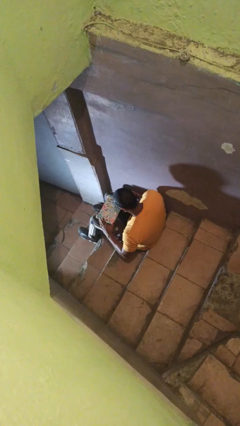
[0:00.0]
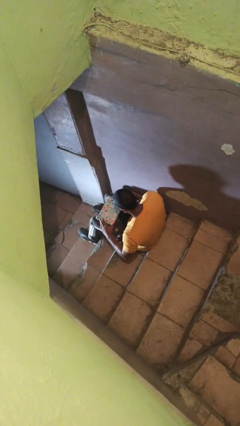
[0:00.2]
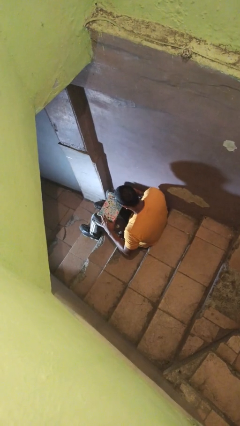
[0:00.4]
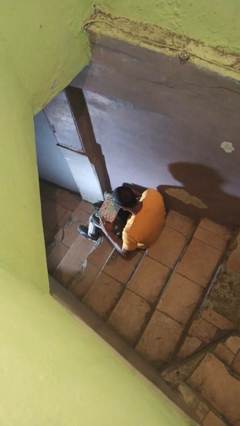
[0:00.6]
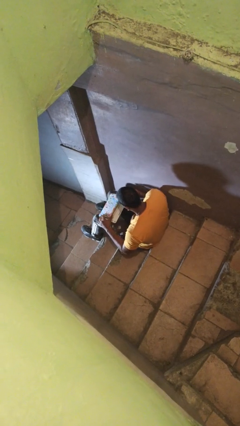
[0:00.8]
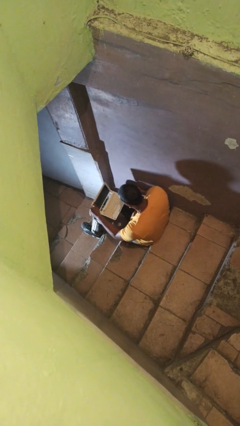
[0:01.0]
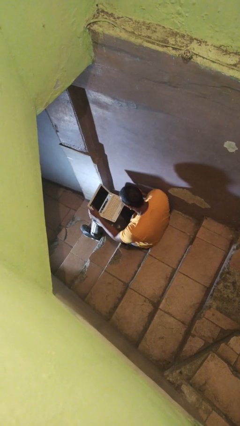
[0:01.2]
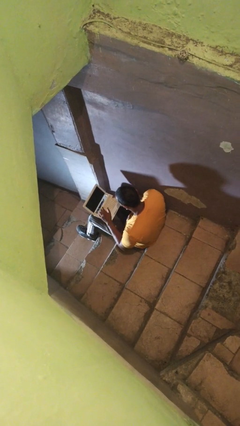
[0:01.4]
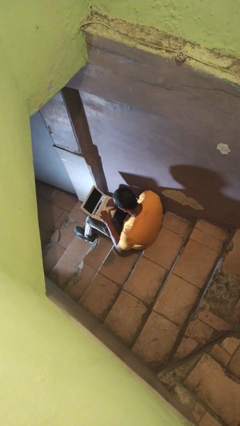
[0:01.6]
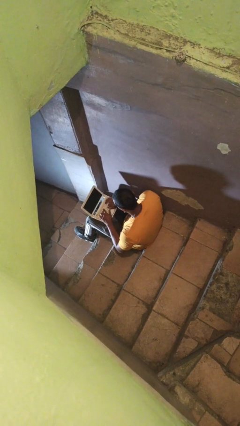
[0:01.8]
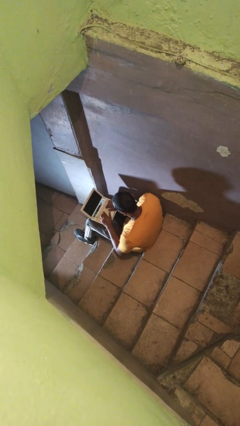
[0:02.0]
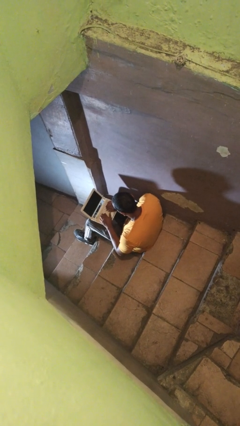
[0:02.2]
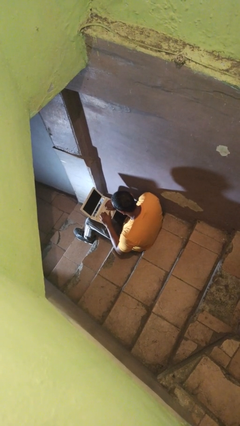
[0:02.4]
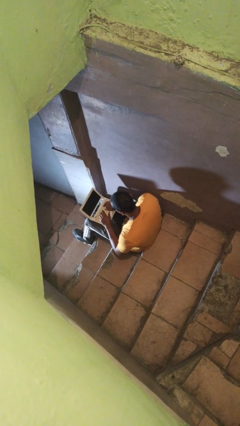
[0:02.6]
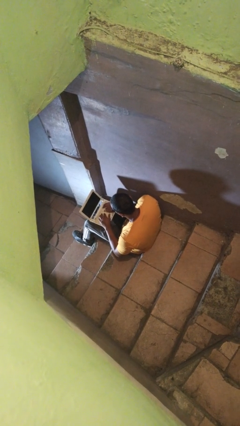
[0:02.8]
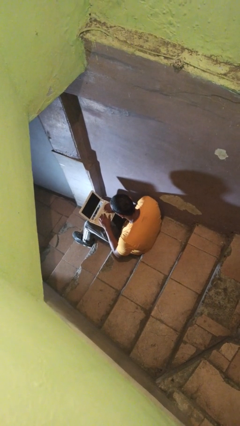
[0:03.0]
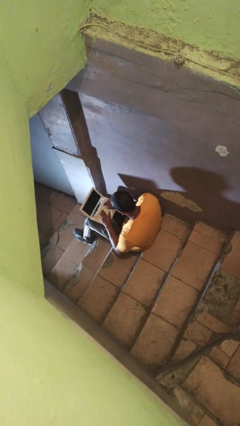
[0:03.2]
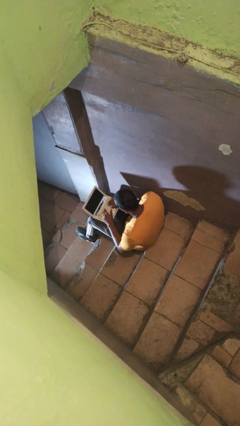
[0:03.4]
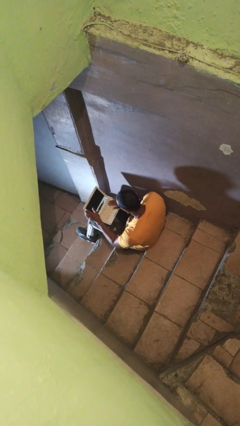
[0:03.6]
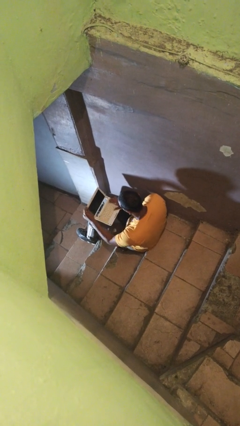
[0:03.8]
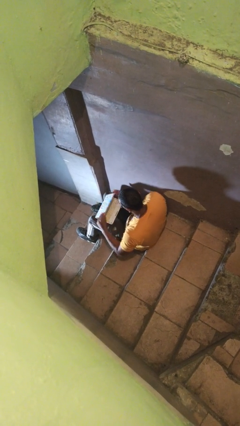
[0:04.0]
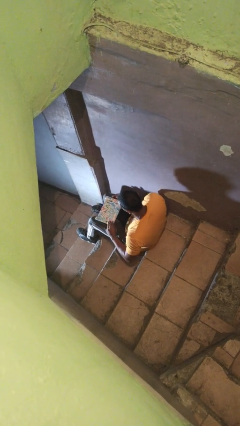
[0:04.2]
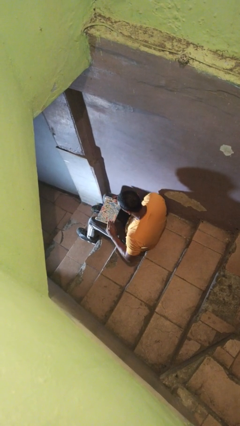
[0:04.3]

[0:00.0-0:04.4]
person interacts with laptop

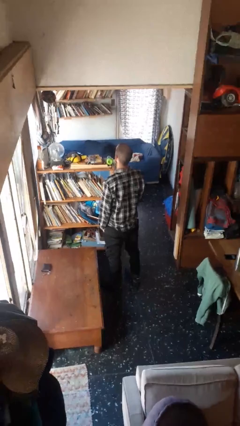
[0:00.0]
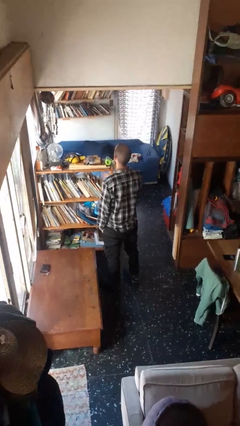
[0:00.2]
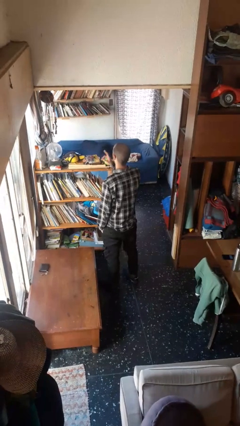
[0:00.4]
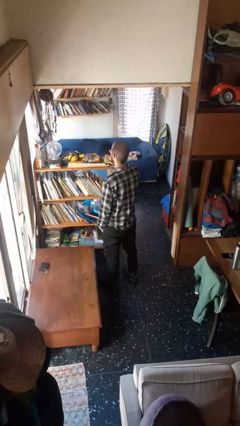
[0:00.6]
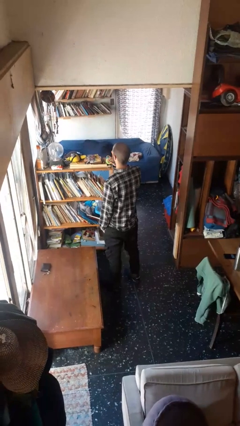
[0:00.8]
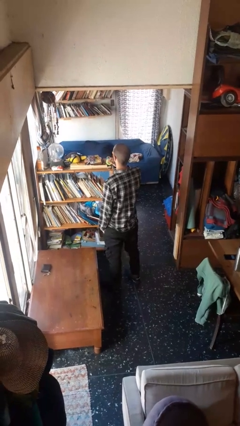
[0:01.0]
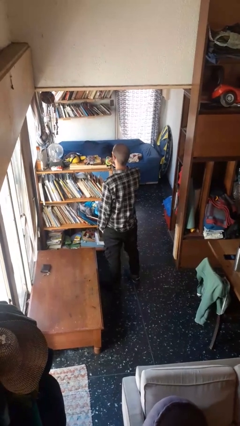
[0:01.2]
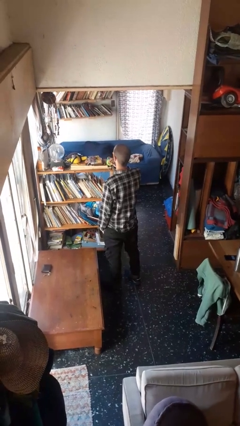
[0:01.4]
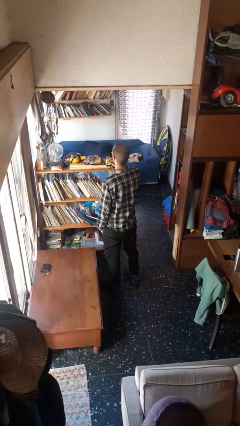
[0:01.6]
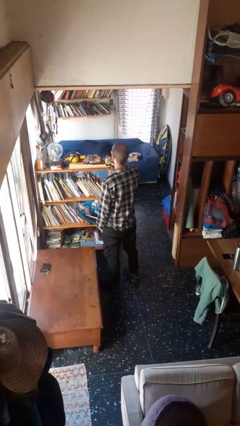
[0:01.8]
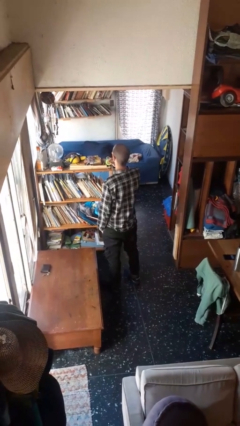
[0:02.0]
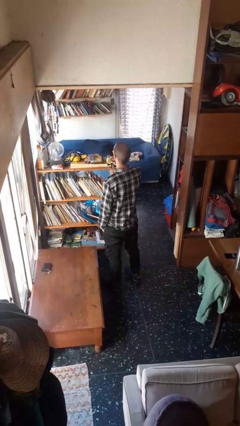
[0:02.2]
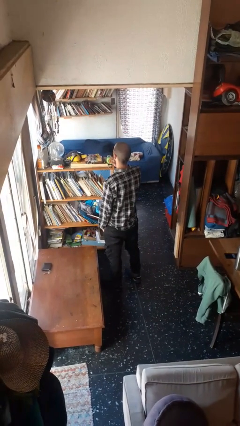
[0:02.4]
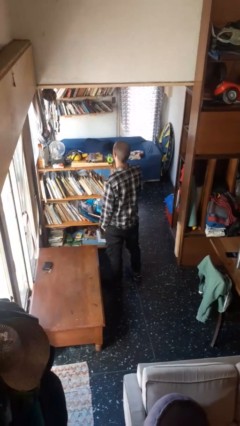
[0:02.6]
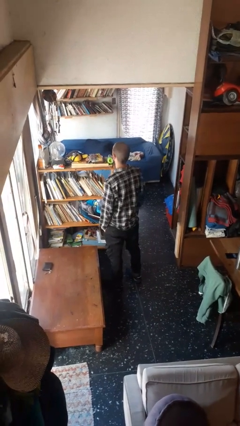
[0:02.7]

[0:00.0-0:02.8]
person gestures be quiet

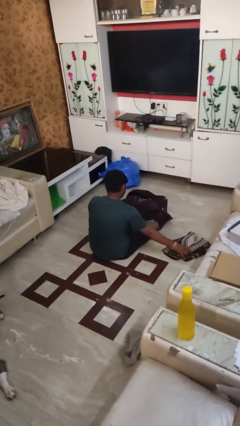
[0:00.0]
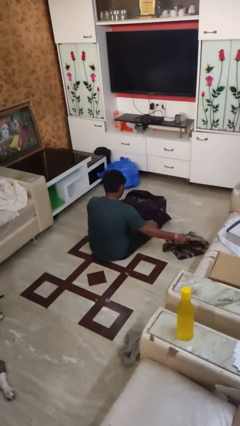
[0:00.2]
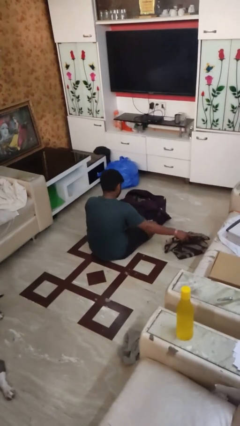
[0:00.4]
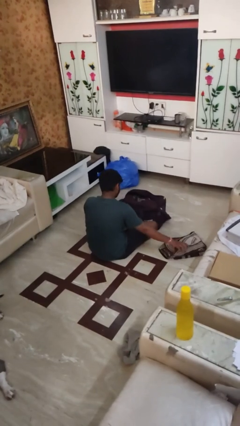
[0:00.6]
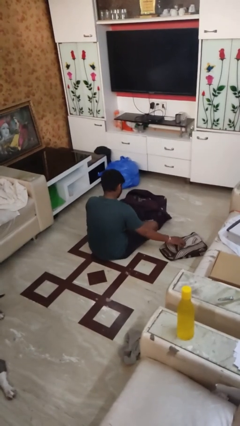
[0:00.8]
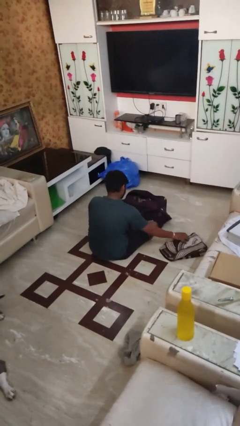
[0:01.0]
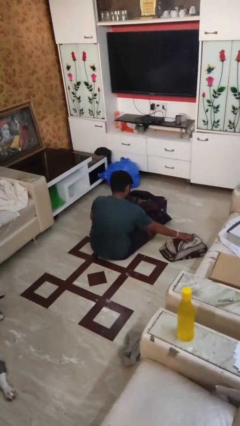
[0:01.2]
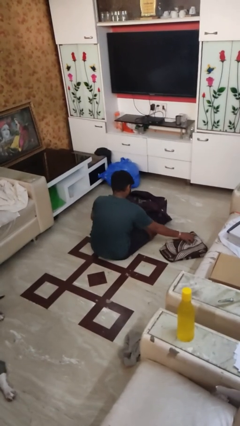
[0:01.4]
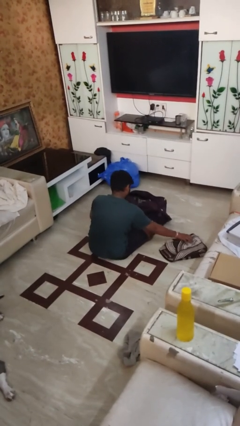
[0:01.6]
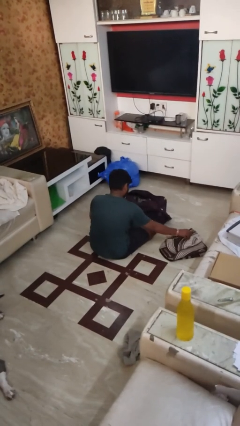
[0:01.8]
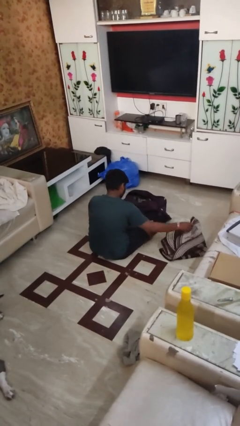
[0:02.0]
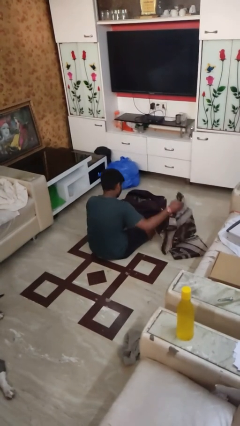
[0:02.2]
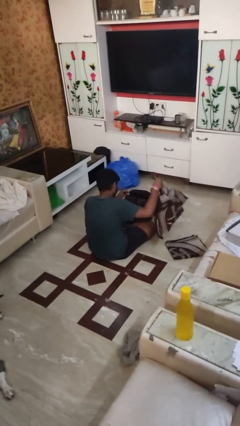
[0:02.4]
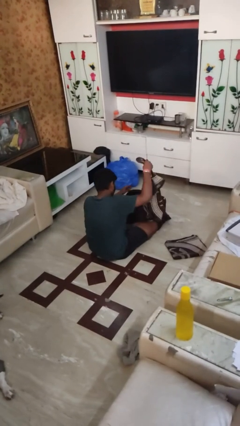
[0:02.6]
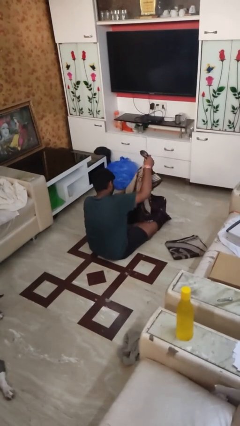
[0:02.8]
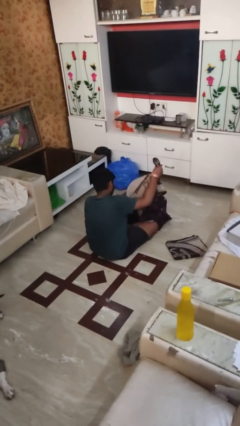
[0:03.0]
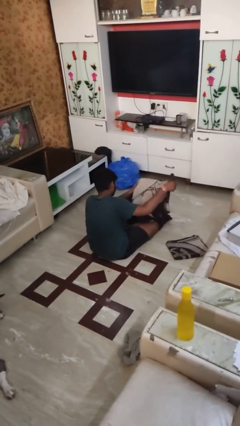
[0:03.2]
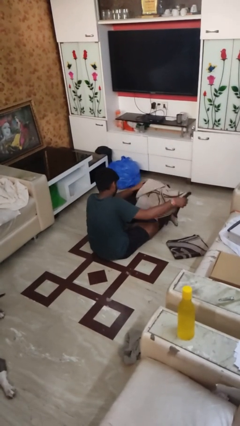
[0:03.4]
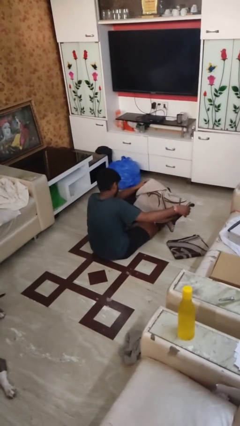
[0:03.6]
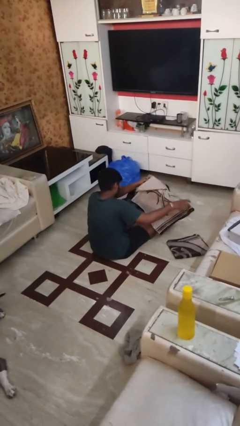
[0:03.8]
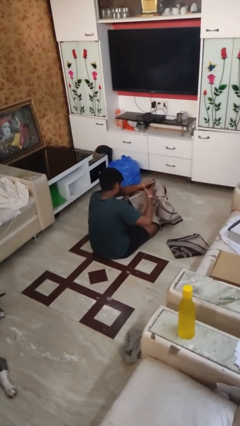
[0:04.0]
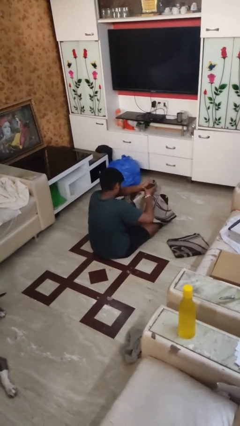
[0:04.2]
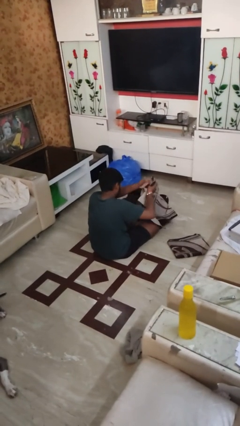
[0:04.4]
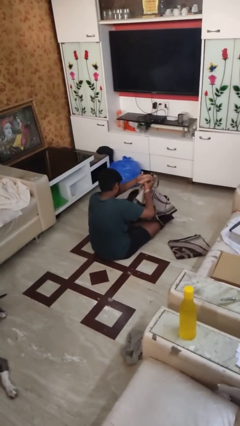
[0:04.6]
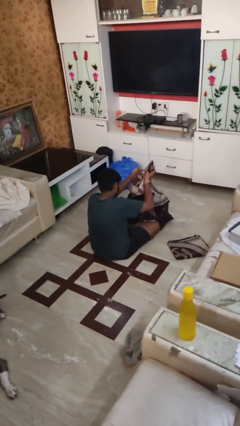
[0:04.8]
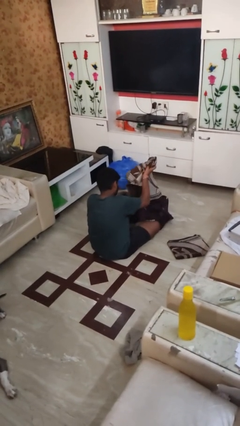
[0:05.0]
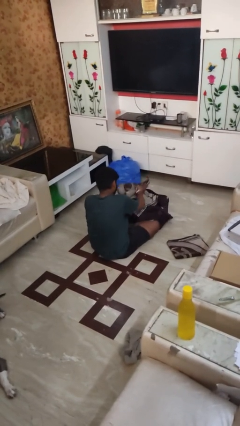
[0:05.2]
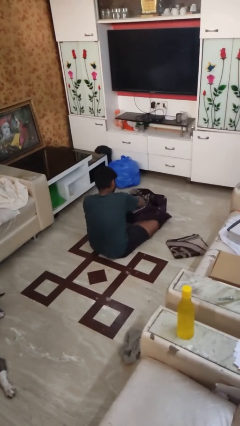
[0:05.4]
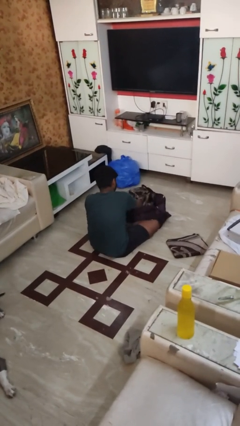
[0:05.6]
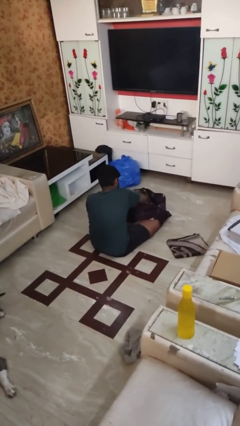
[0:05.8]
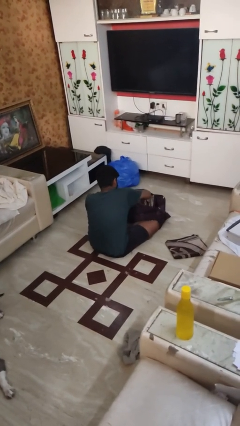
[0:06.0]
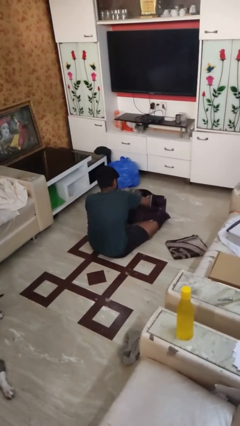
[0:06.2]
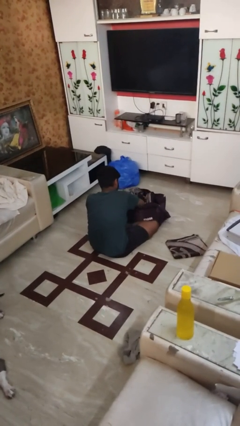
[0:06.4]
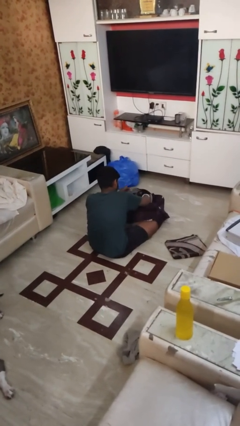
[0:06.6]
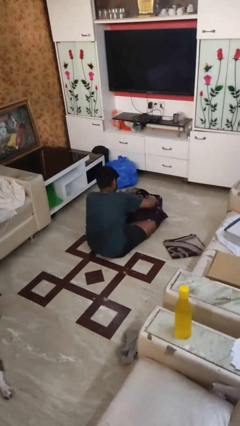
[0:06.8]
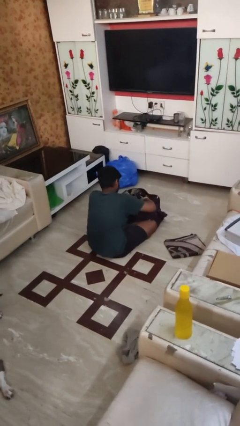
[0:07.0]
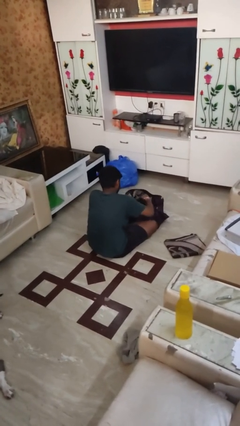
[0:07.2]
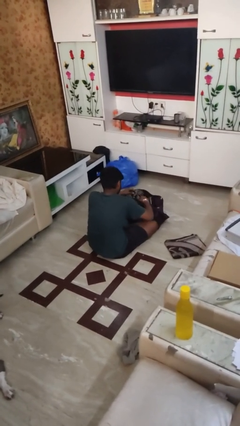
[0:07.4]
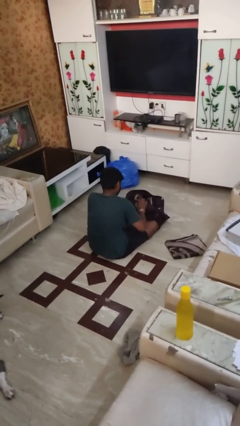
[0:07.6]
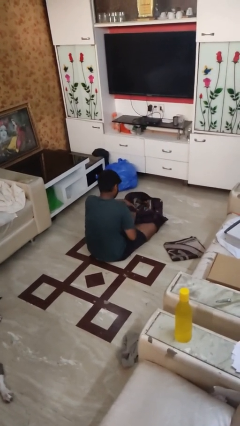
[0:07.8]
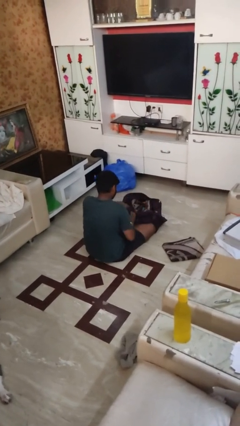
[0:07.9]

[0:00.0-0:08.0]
person loads clothes into suitcase

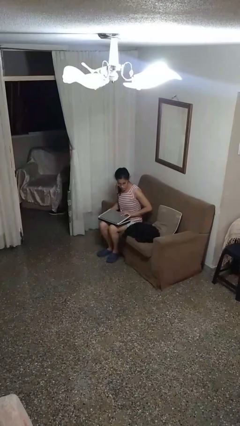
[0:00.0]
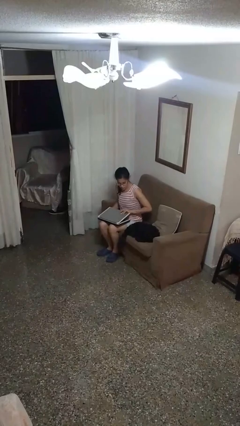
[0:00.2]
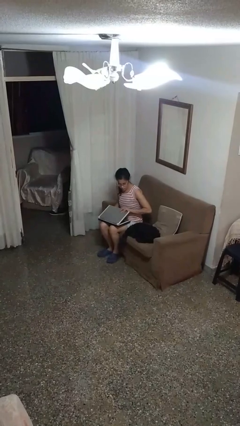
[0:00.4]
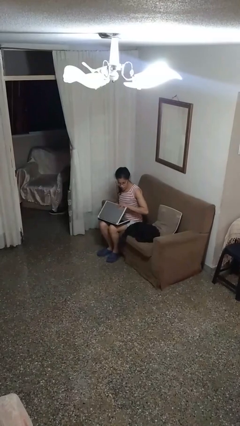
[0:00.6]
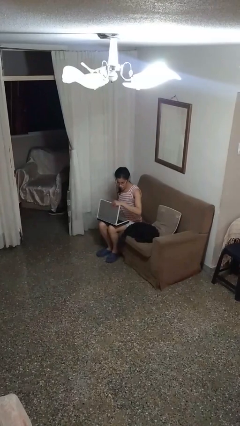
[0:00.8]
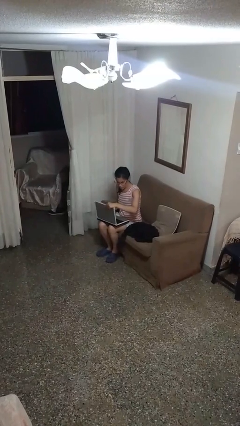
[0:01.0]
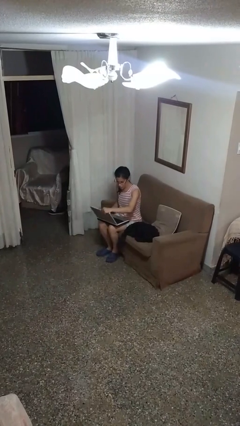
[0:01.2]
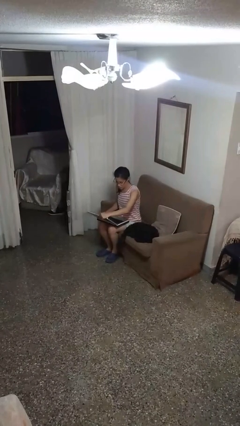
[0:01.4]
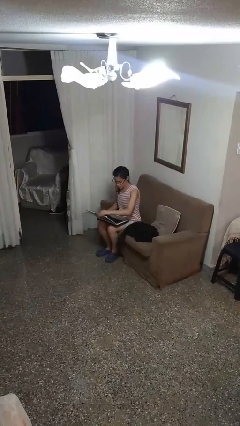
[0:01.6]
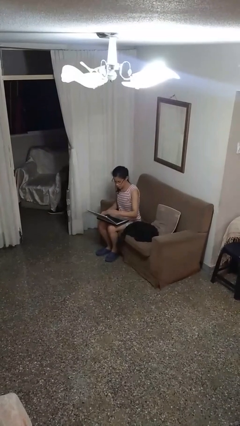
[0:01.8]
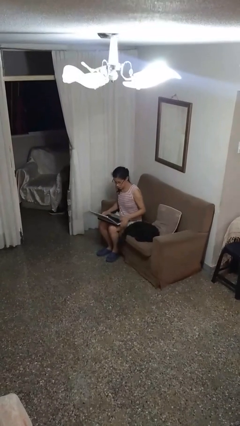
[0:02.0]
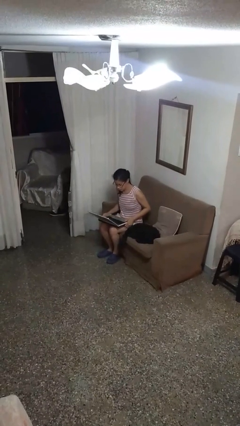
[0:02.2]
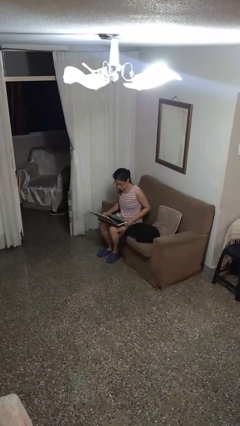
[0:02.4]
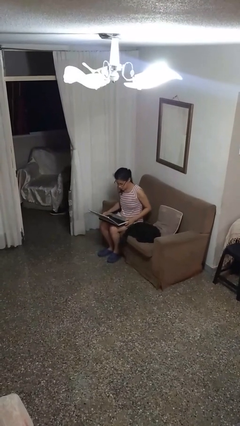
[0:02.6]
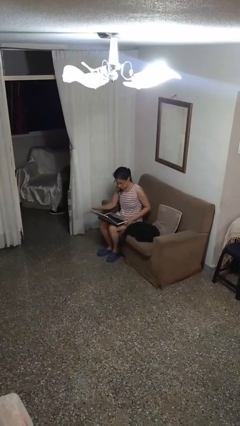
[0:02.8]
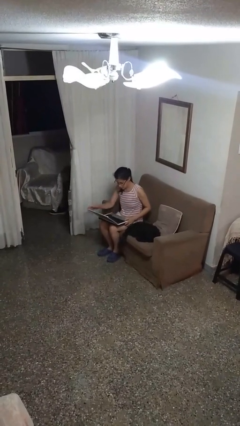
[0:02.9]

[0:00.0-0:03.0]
person opens laptop
